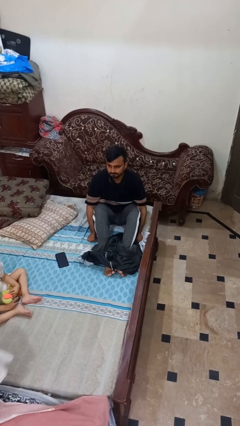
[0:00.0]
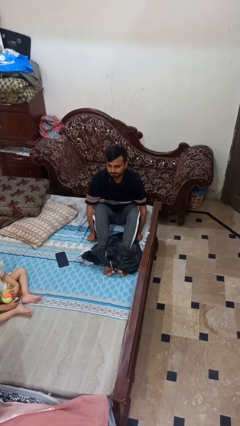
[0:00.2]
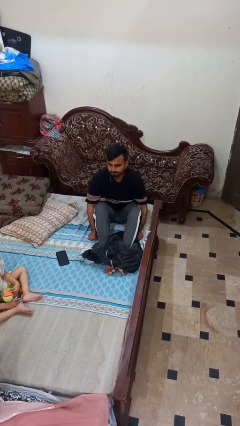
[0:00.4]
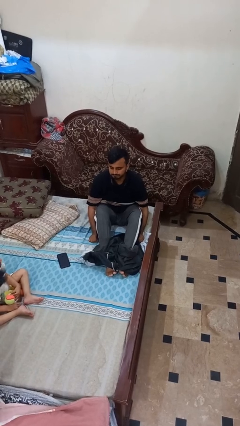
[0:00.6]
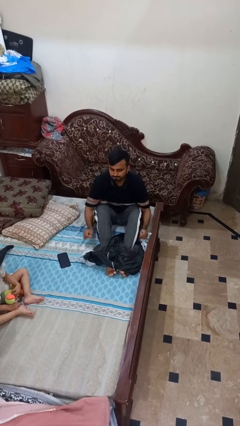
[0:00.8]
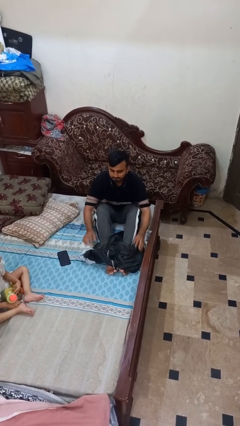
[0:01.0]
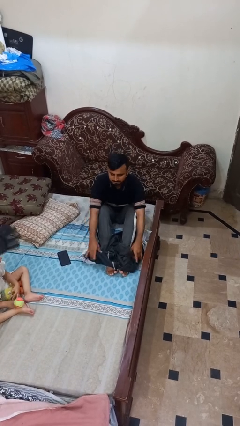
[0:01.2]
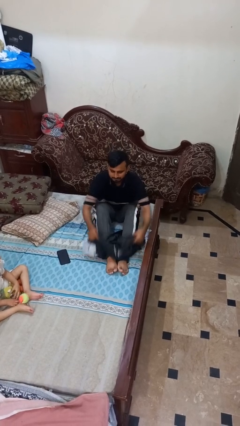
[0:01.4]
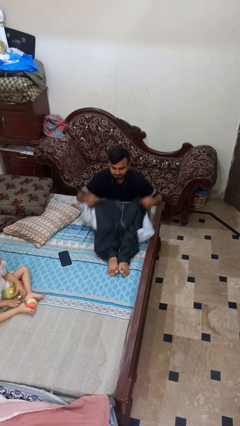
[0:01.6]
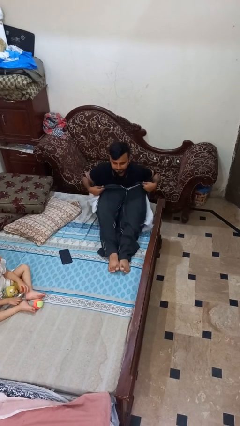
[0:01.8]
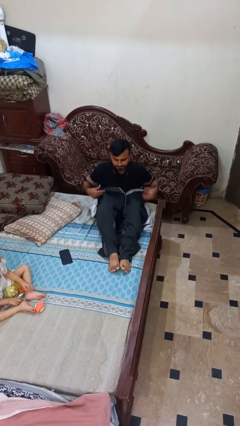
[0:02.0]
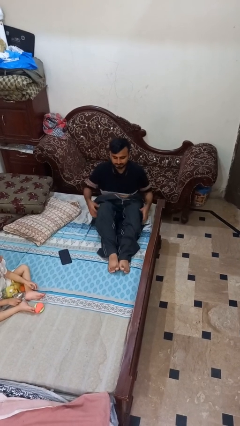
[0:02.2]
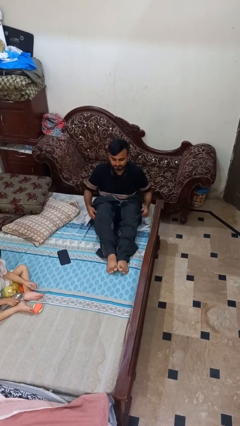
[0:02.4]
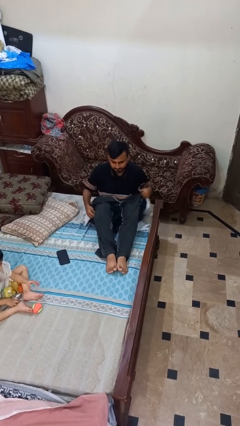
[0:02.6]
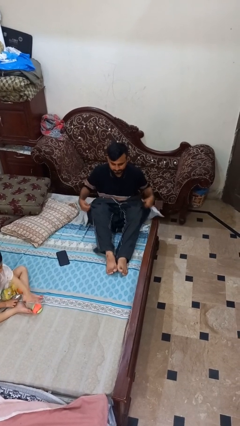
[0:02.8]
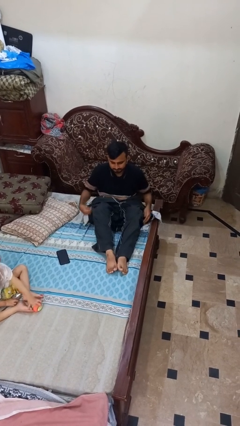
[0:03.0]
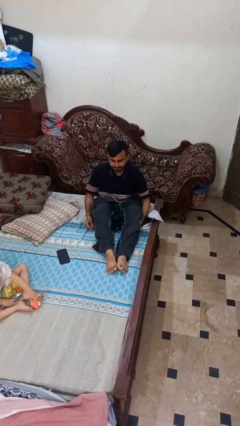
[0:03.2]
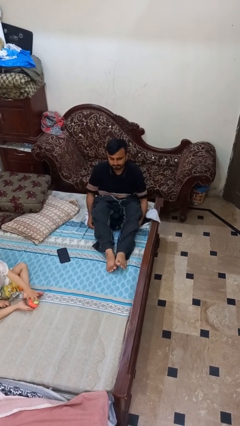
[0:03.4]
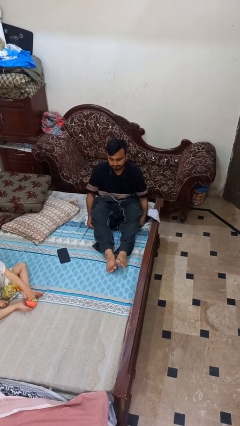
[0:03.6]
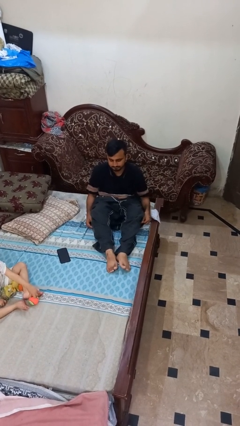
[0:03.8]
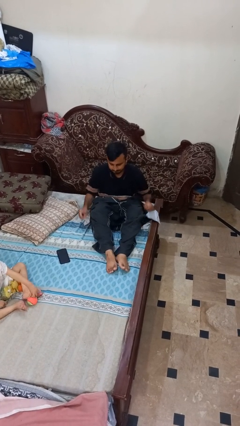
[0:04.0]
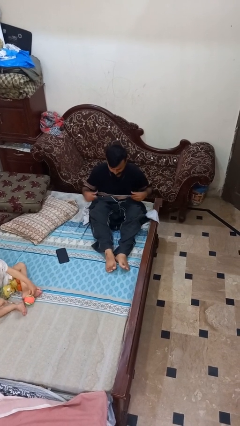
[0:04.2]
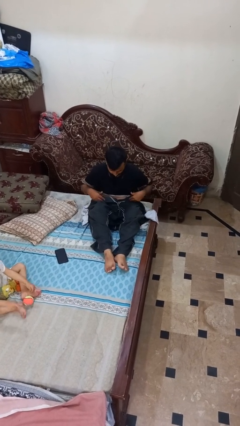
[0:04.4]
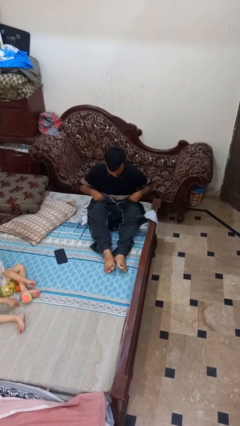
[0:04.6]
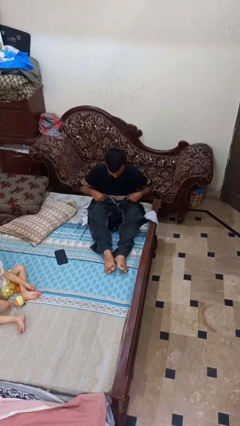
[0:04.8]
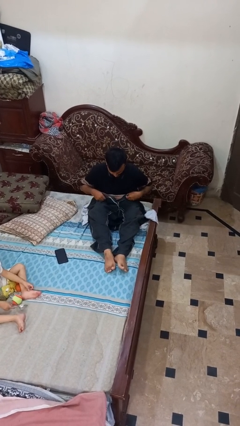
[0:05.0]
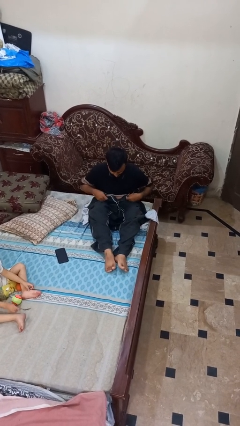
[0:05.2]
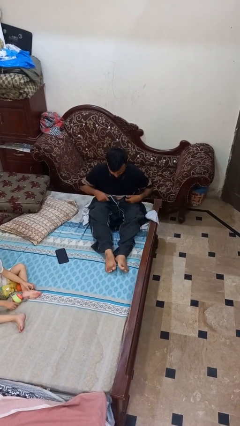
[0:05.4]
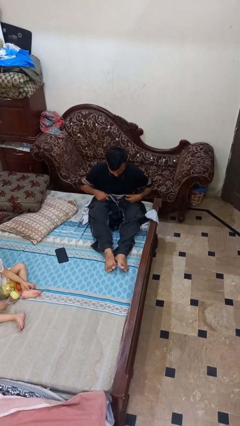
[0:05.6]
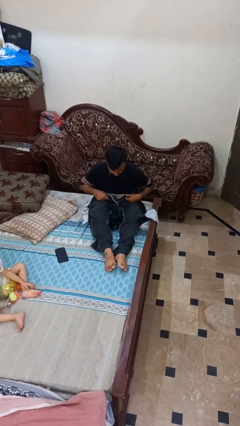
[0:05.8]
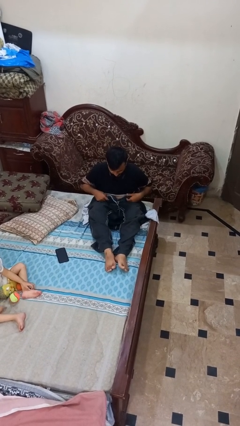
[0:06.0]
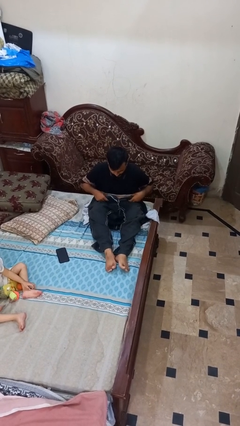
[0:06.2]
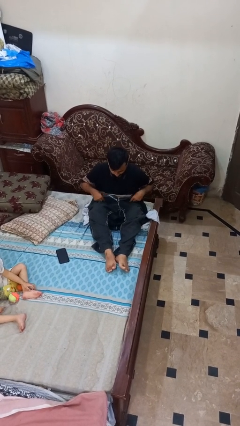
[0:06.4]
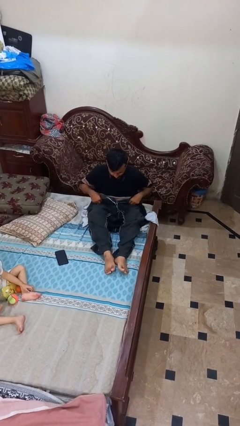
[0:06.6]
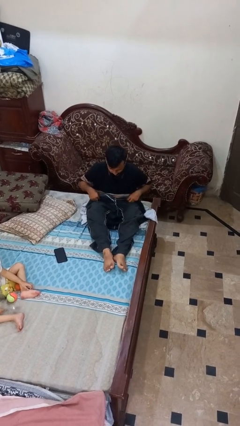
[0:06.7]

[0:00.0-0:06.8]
person puts on pants

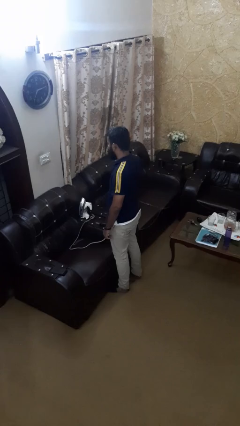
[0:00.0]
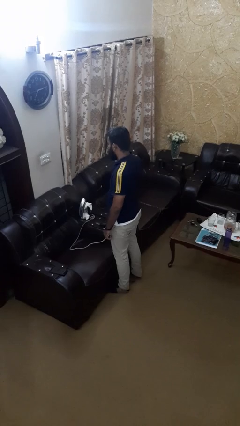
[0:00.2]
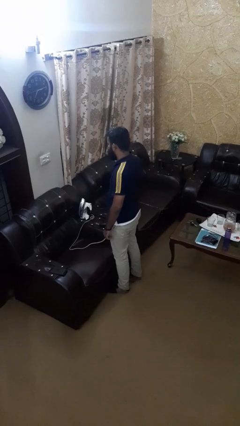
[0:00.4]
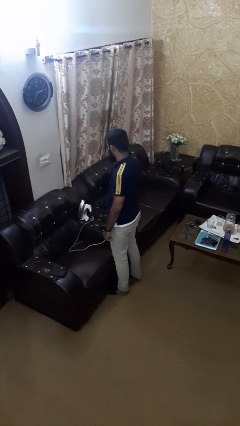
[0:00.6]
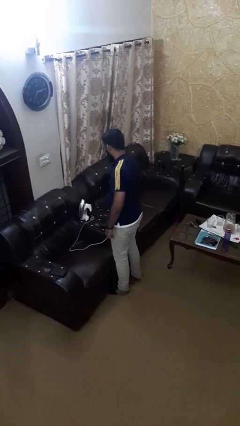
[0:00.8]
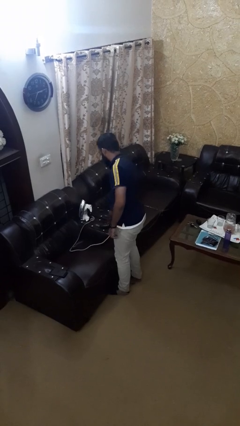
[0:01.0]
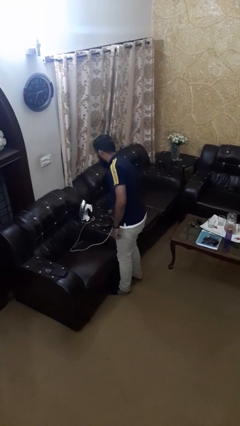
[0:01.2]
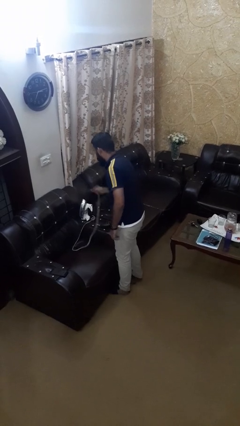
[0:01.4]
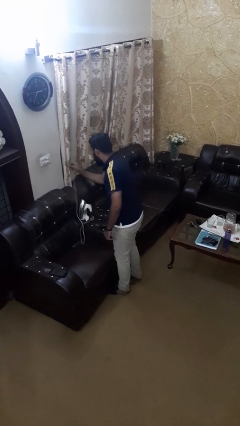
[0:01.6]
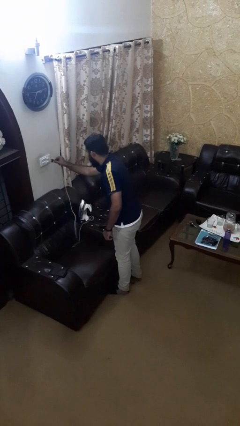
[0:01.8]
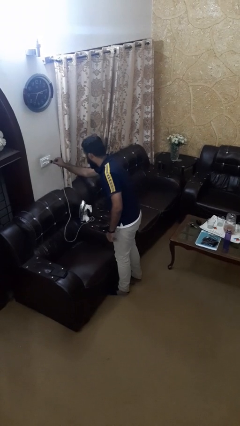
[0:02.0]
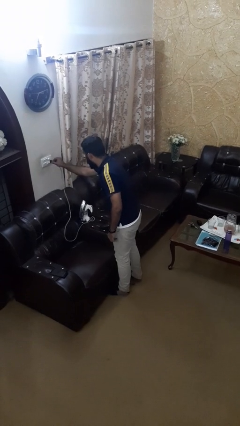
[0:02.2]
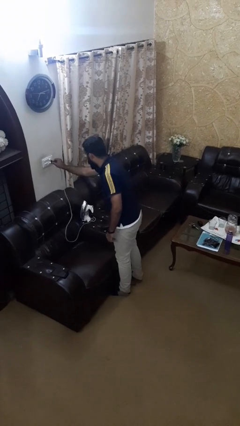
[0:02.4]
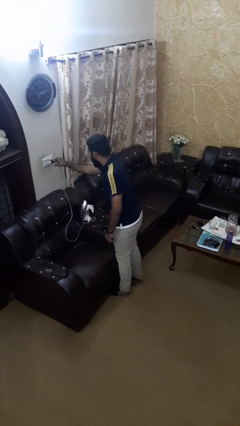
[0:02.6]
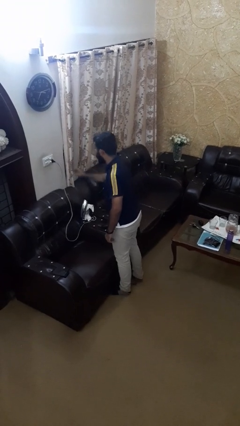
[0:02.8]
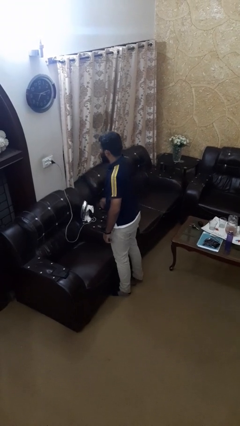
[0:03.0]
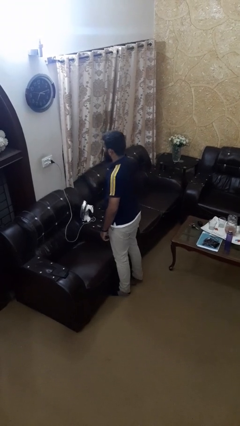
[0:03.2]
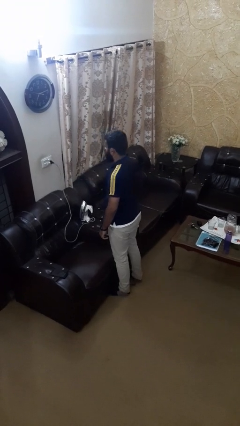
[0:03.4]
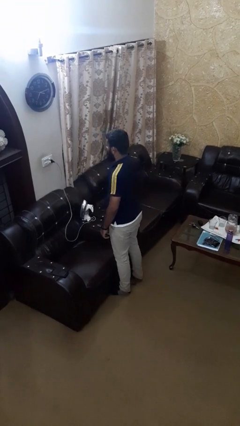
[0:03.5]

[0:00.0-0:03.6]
person plugs into electrical socket

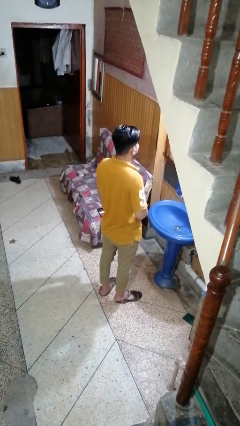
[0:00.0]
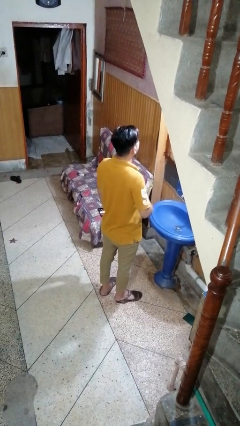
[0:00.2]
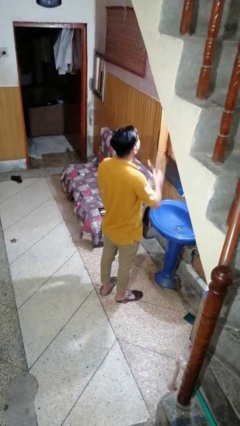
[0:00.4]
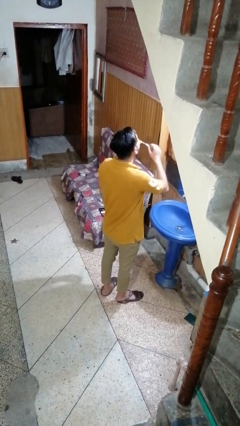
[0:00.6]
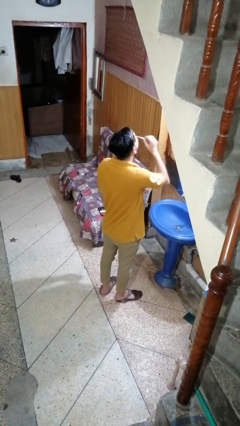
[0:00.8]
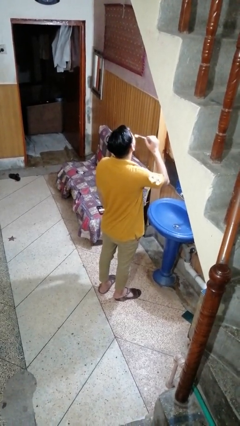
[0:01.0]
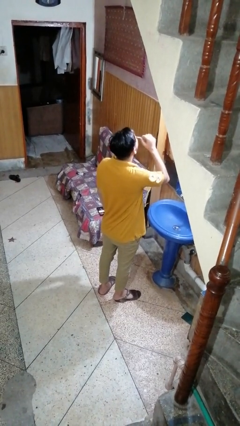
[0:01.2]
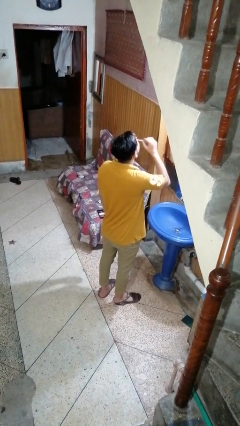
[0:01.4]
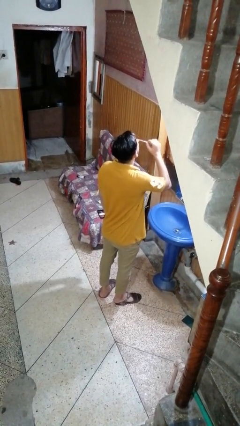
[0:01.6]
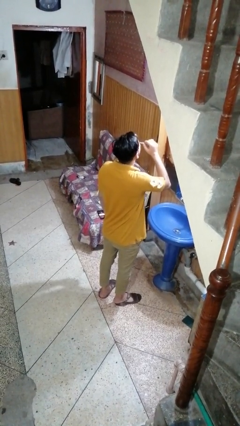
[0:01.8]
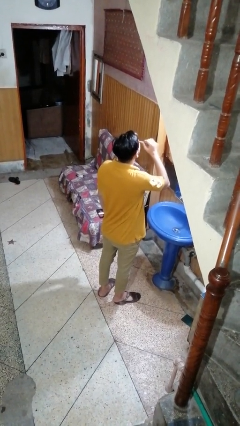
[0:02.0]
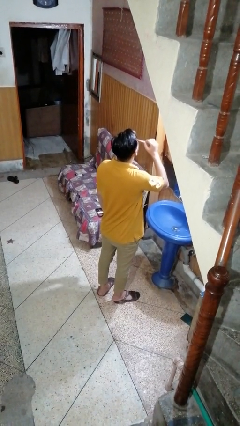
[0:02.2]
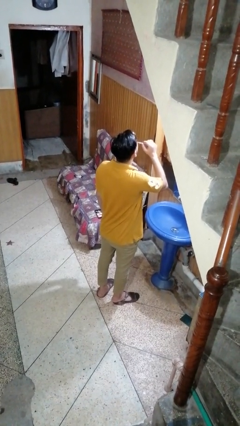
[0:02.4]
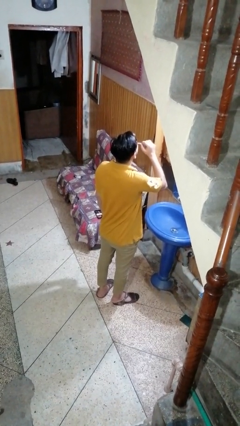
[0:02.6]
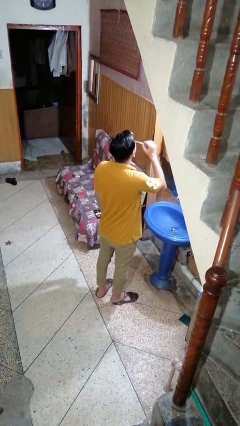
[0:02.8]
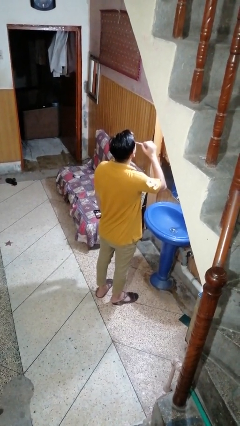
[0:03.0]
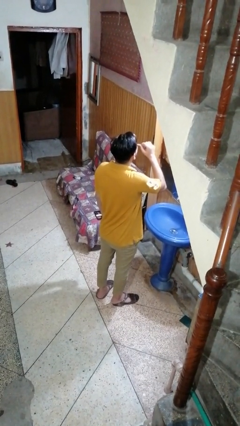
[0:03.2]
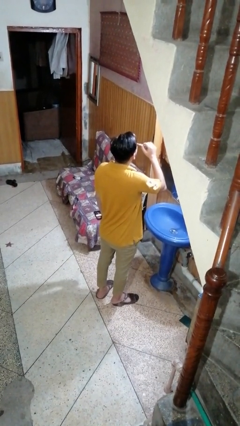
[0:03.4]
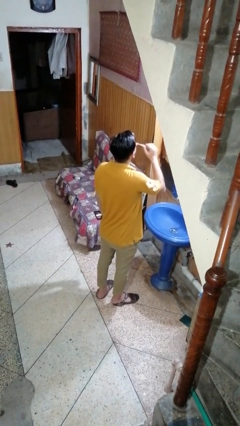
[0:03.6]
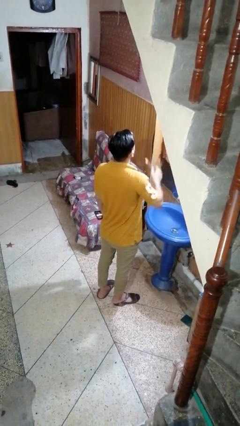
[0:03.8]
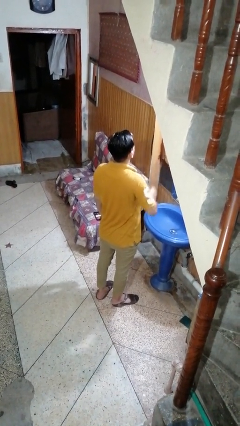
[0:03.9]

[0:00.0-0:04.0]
person brushes teeth

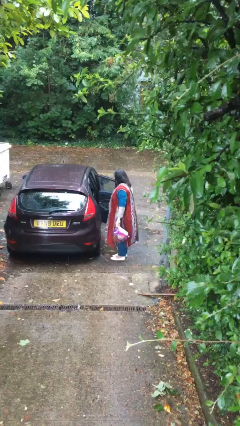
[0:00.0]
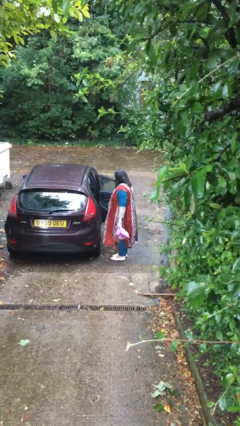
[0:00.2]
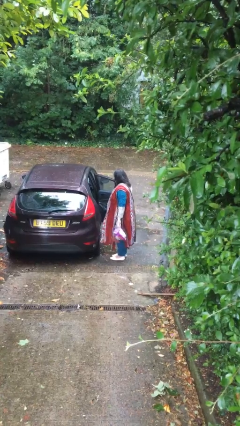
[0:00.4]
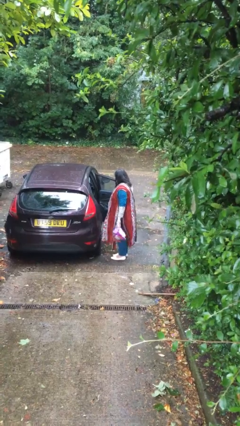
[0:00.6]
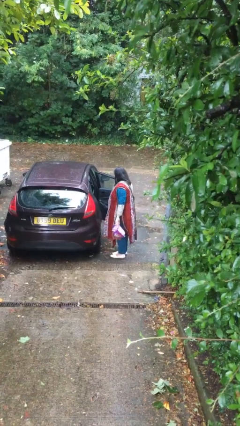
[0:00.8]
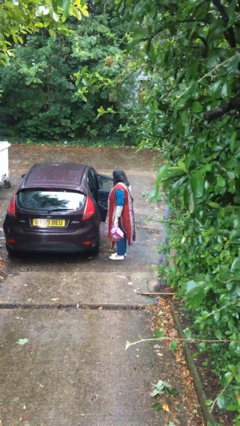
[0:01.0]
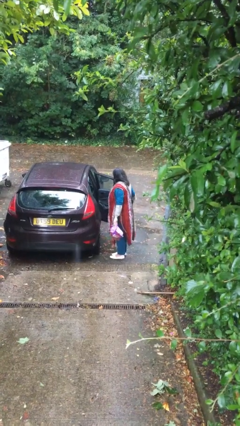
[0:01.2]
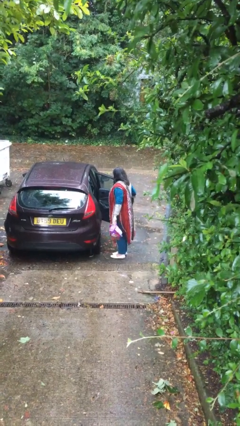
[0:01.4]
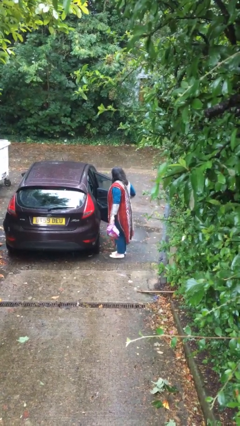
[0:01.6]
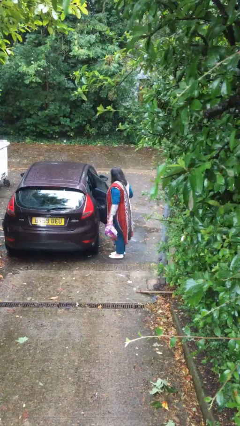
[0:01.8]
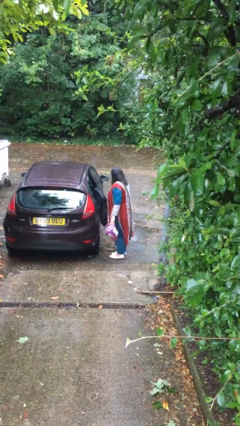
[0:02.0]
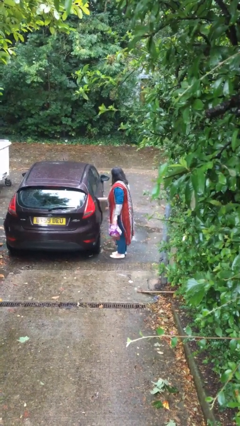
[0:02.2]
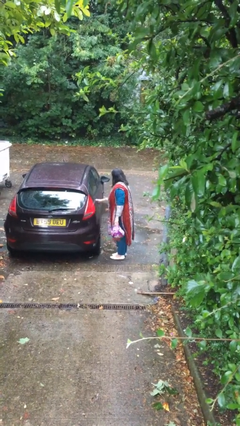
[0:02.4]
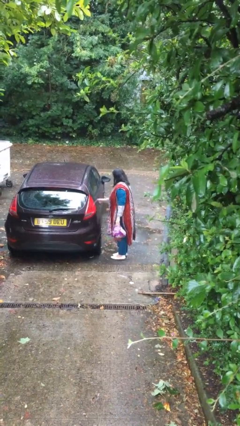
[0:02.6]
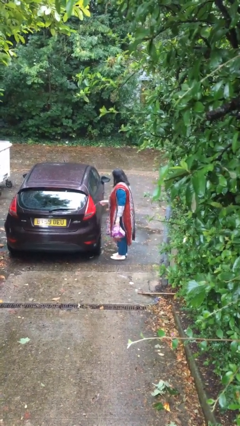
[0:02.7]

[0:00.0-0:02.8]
person closes car door

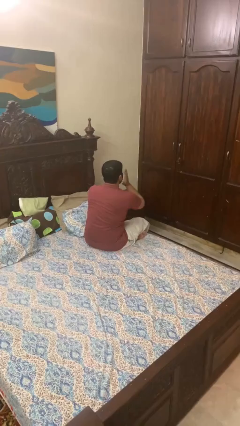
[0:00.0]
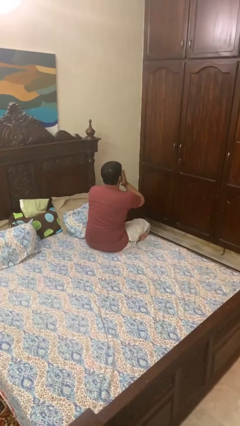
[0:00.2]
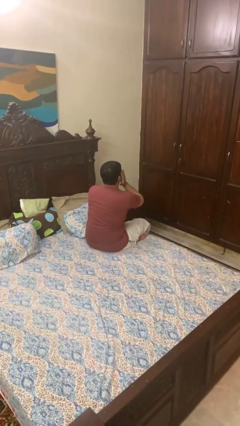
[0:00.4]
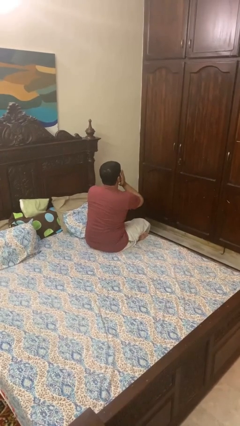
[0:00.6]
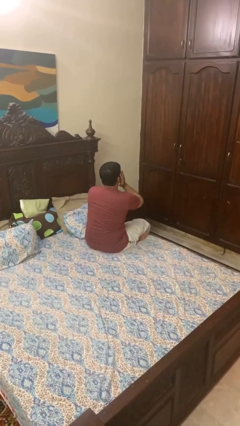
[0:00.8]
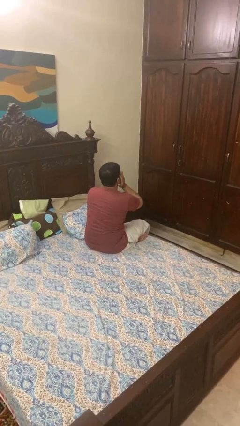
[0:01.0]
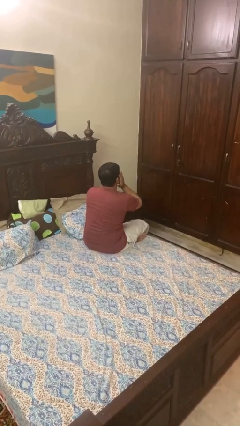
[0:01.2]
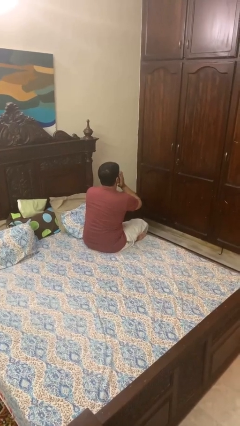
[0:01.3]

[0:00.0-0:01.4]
person covers face with hands
